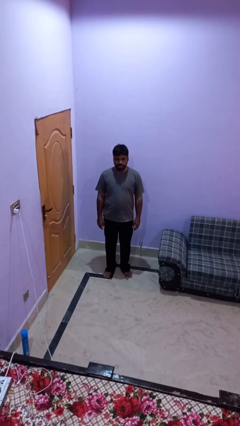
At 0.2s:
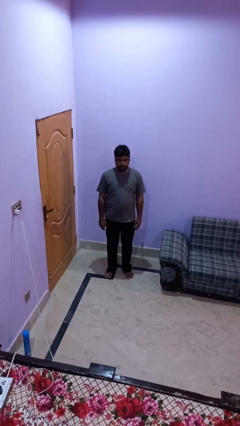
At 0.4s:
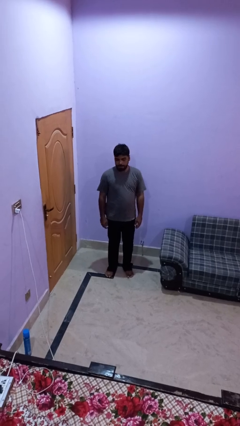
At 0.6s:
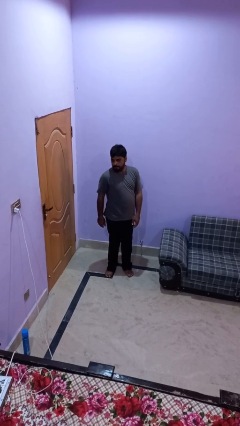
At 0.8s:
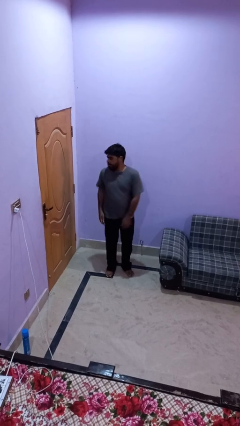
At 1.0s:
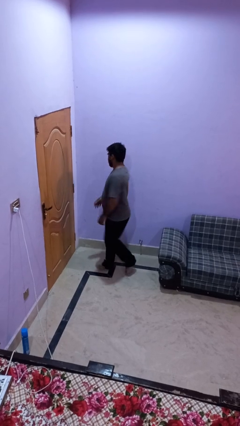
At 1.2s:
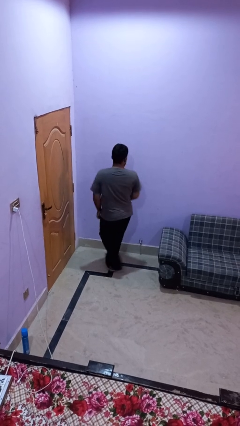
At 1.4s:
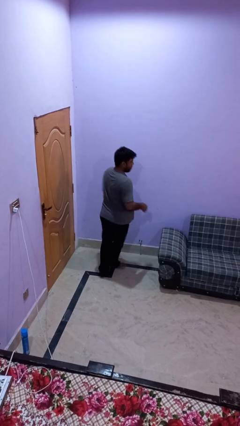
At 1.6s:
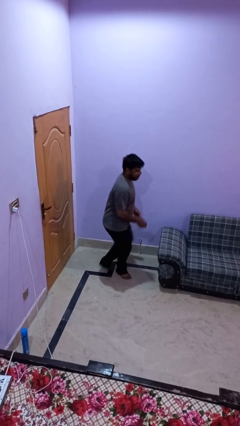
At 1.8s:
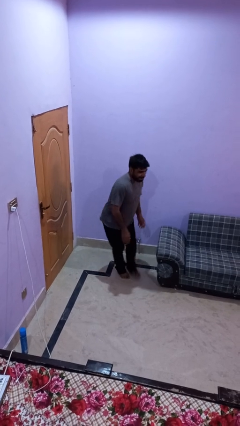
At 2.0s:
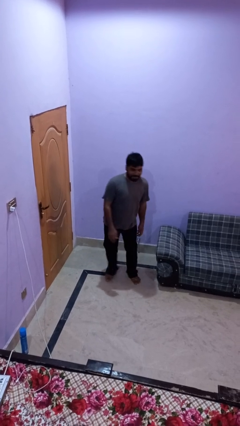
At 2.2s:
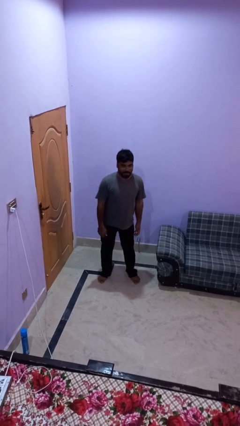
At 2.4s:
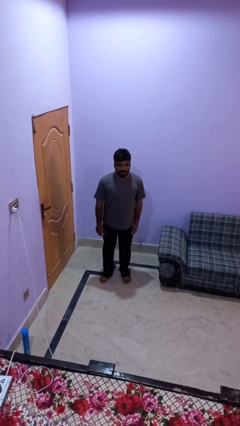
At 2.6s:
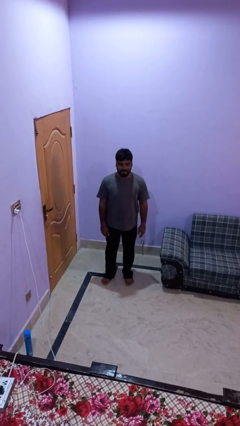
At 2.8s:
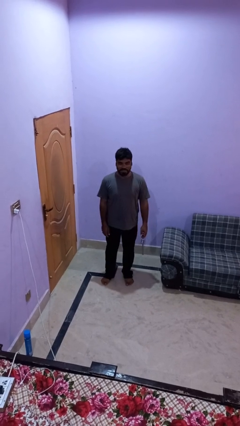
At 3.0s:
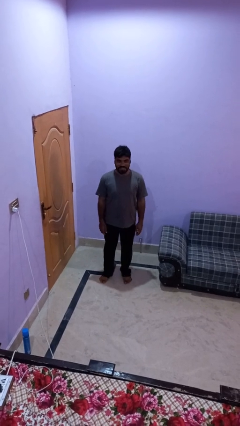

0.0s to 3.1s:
person twirls

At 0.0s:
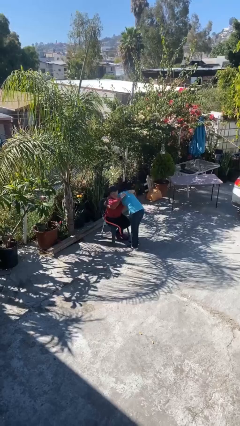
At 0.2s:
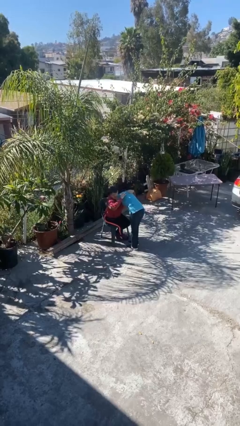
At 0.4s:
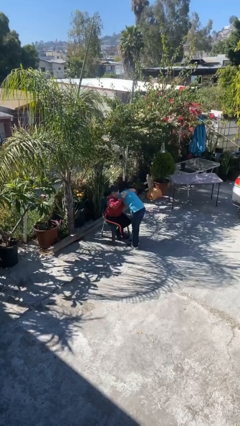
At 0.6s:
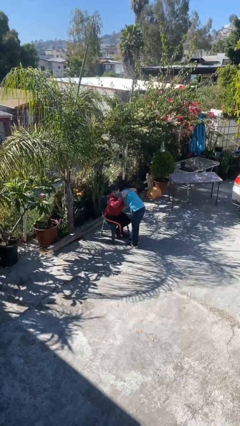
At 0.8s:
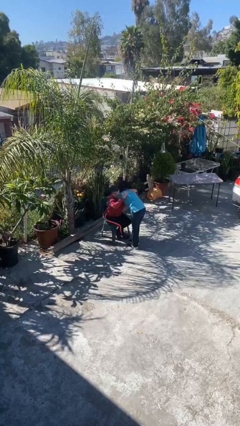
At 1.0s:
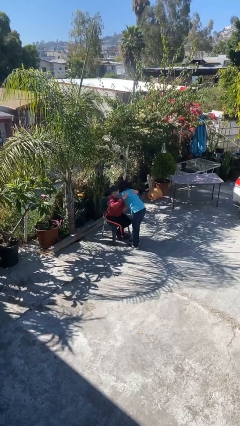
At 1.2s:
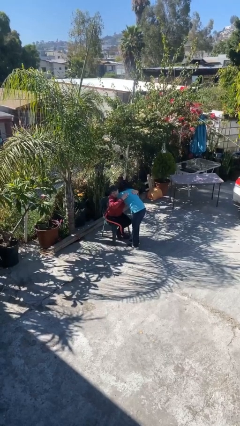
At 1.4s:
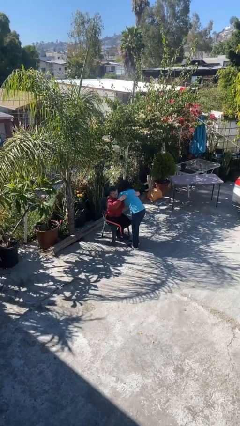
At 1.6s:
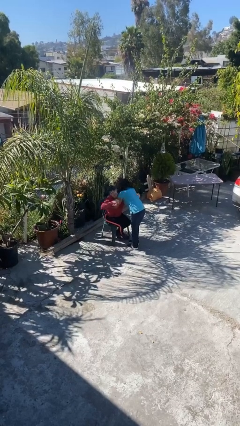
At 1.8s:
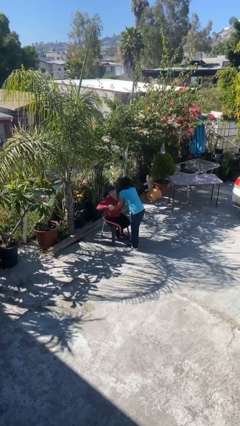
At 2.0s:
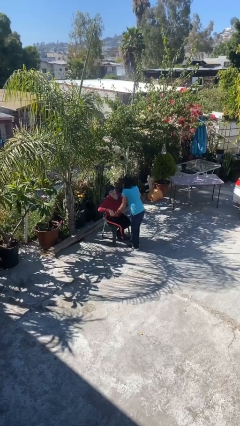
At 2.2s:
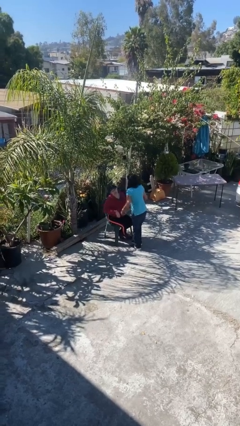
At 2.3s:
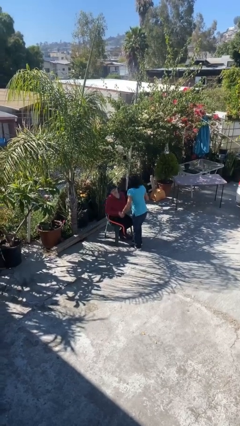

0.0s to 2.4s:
person embraces person

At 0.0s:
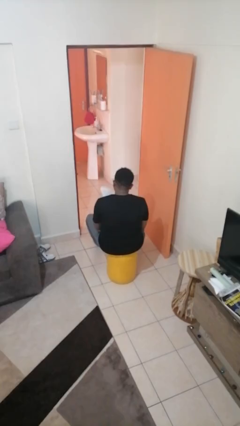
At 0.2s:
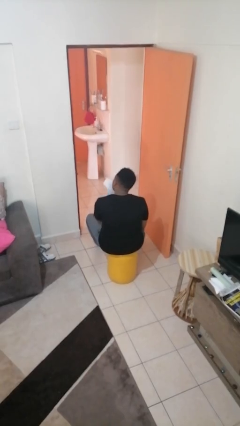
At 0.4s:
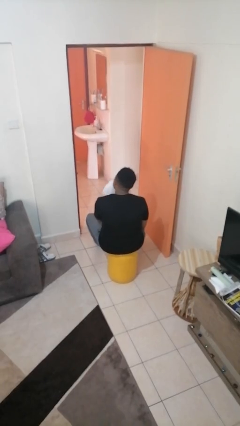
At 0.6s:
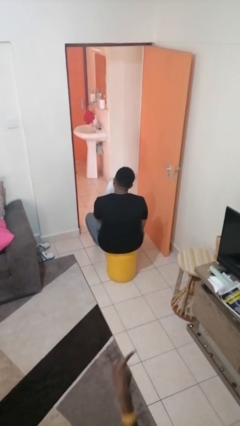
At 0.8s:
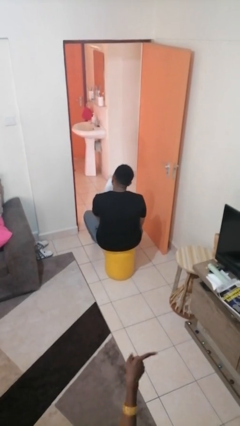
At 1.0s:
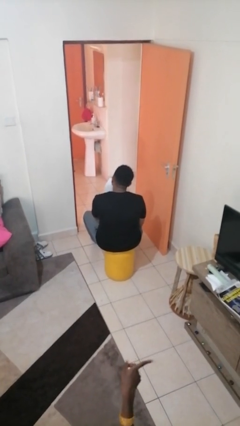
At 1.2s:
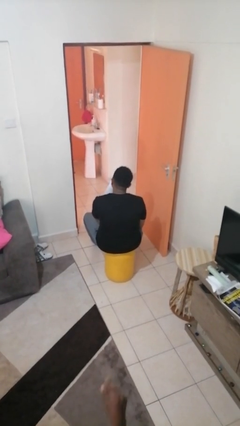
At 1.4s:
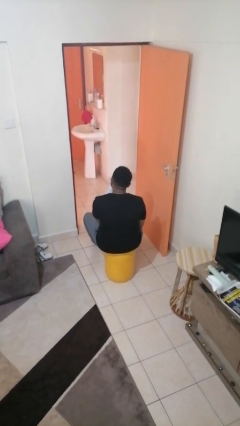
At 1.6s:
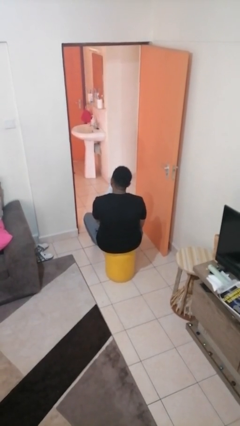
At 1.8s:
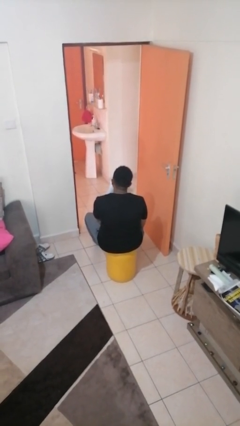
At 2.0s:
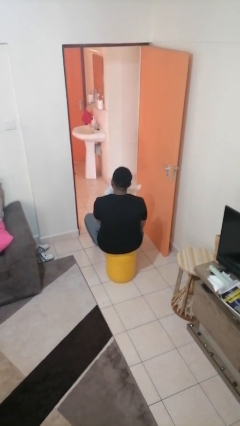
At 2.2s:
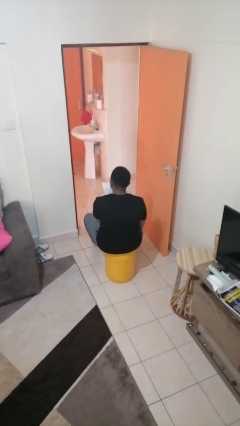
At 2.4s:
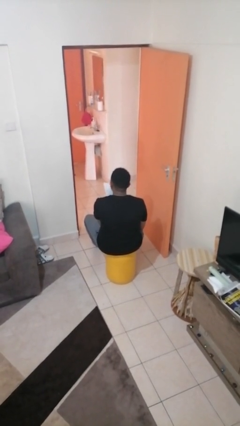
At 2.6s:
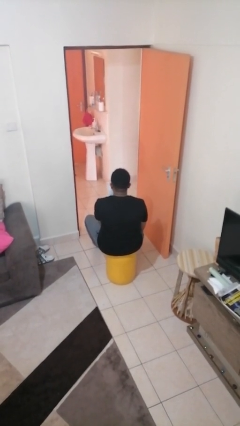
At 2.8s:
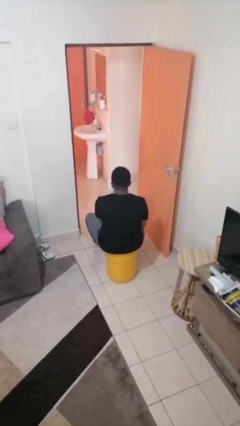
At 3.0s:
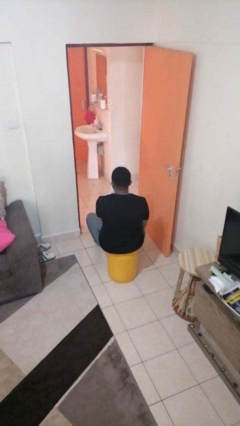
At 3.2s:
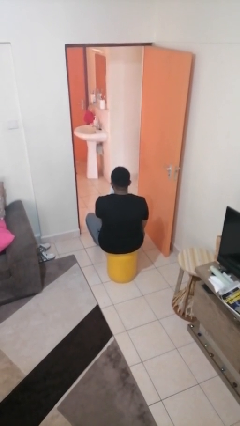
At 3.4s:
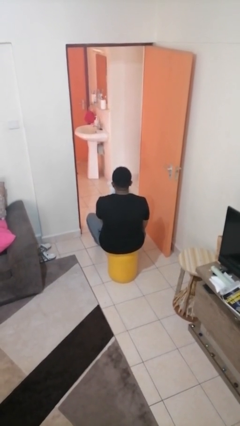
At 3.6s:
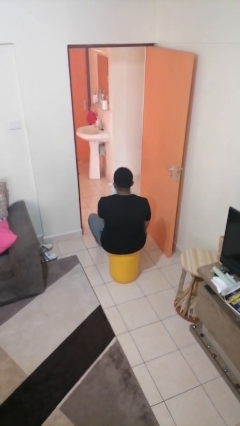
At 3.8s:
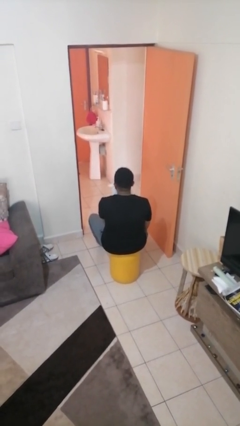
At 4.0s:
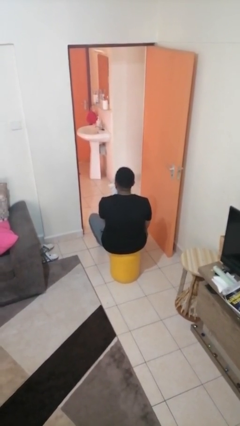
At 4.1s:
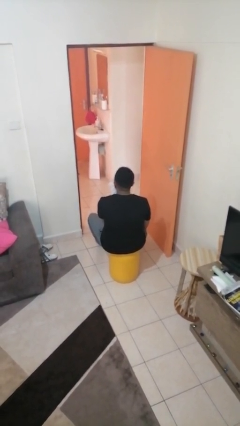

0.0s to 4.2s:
person wipes mouth with napkin

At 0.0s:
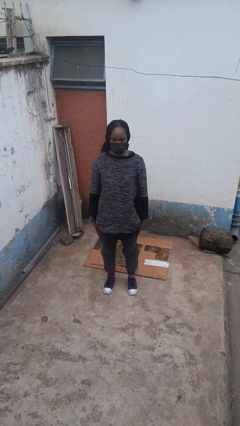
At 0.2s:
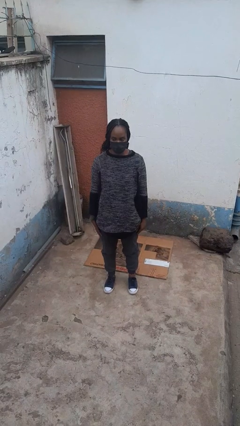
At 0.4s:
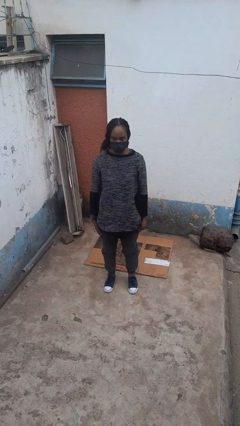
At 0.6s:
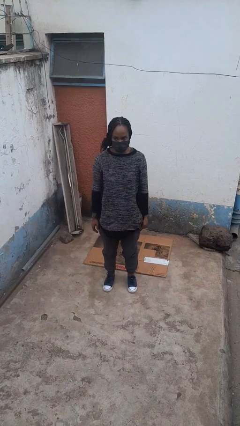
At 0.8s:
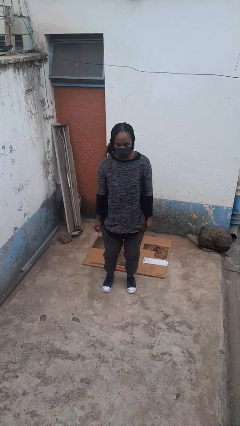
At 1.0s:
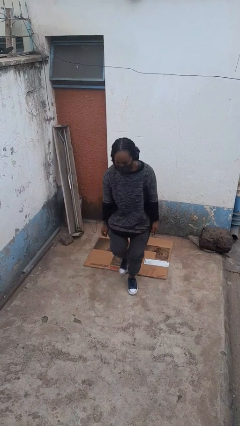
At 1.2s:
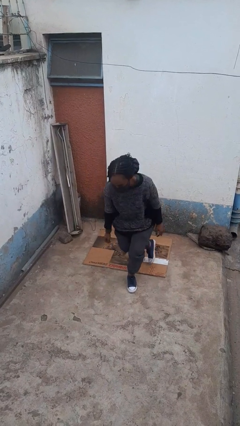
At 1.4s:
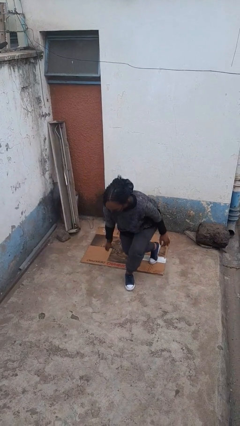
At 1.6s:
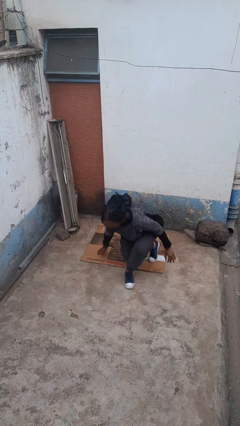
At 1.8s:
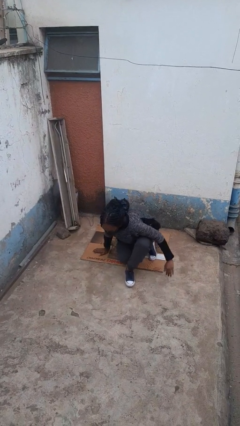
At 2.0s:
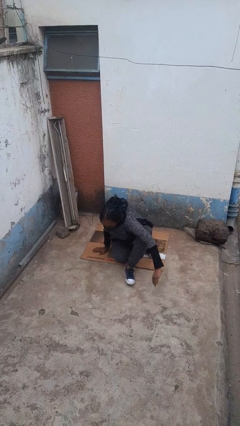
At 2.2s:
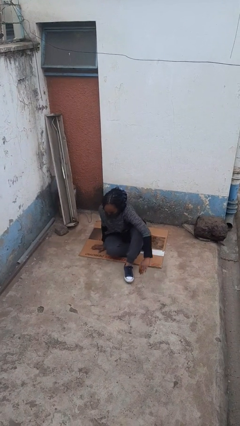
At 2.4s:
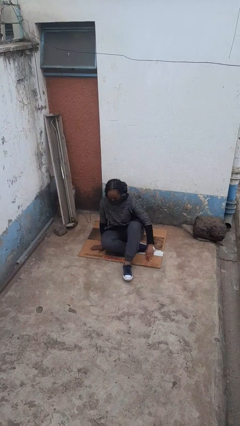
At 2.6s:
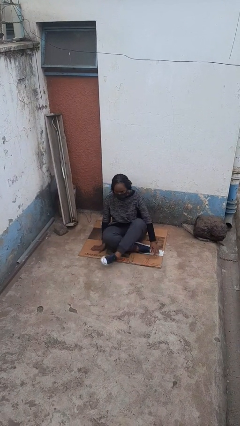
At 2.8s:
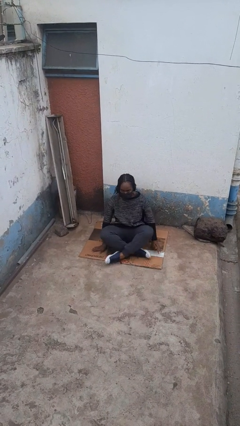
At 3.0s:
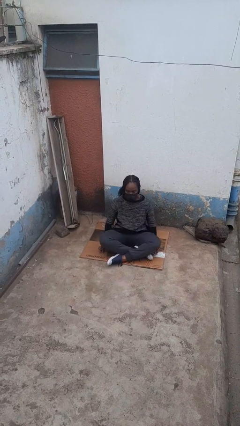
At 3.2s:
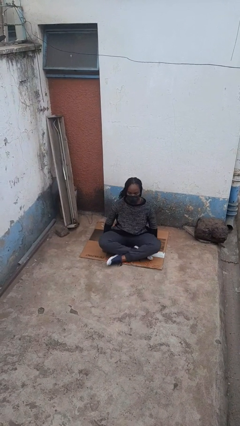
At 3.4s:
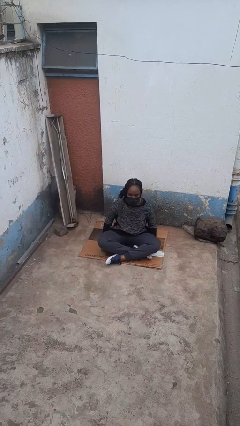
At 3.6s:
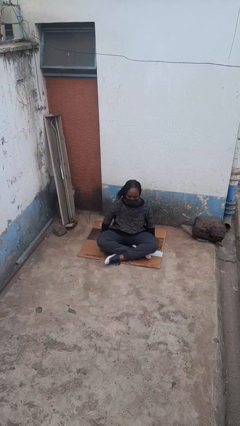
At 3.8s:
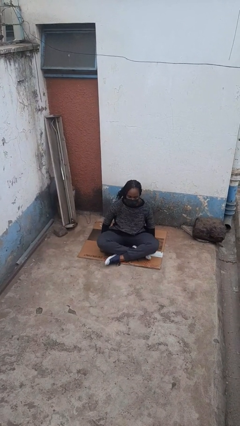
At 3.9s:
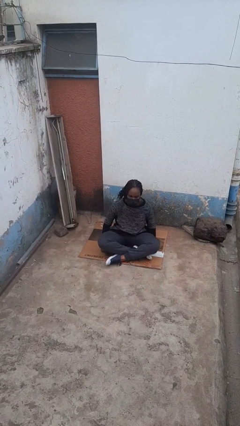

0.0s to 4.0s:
person sits crisscross

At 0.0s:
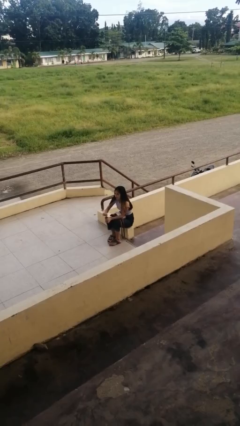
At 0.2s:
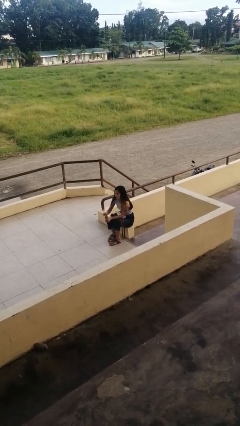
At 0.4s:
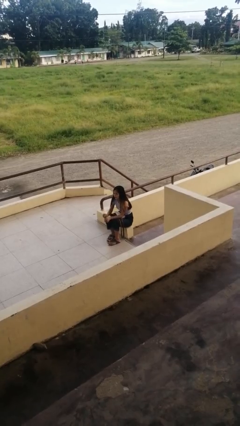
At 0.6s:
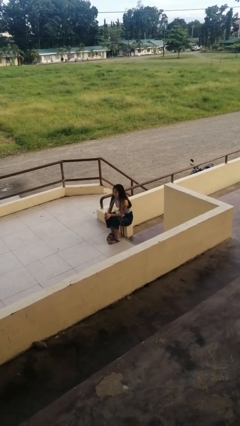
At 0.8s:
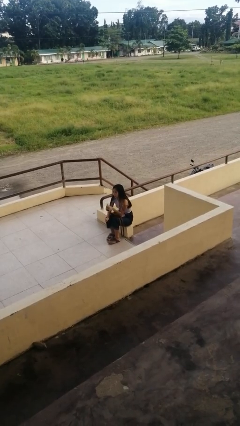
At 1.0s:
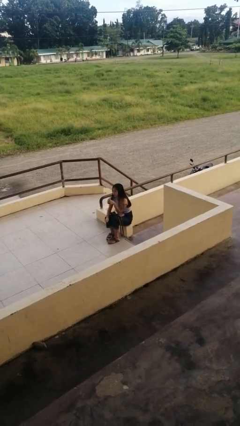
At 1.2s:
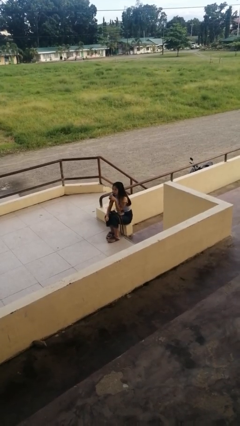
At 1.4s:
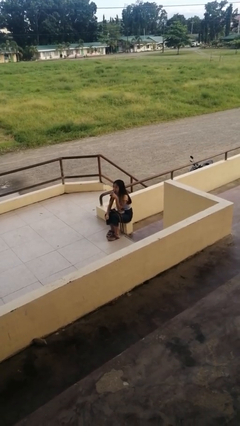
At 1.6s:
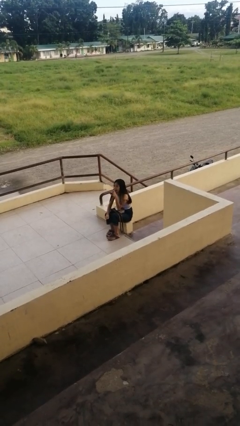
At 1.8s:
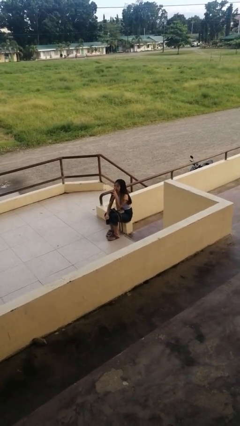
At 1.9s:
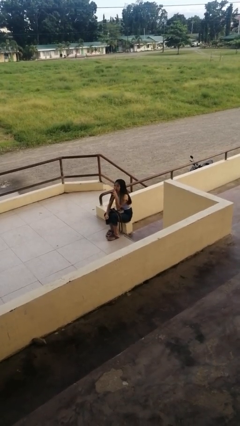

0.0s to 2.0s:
person drinks from beverage can

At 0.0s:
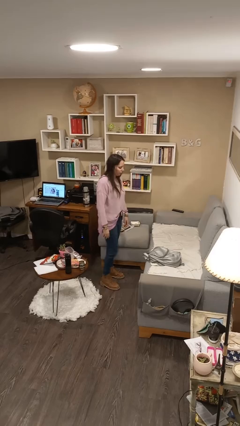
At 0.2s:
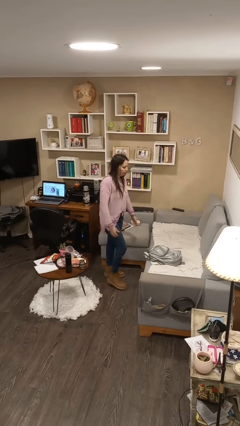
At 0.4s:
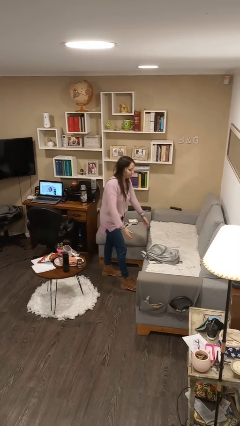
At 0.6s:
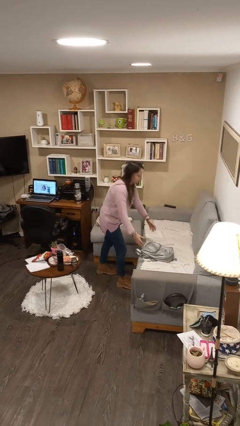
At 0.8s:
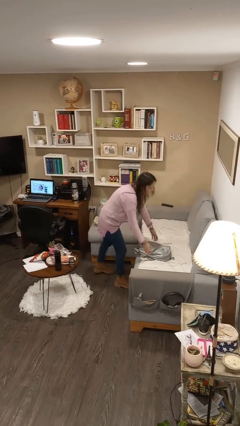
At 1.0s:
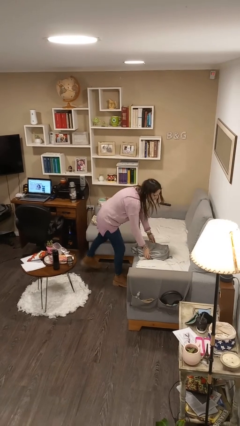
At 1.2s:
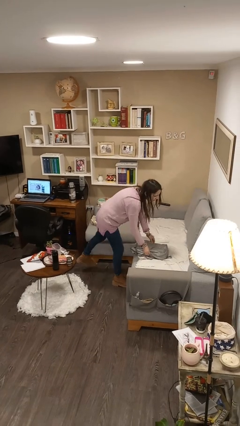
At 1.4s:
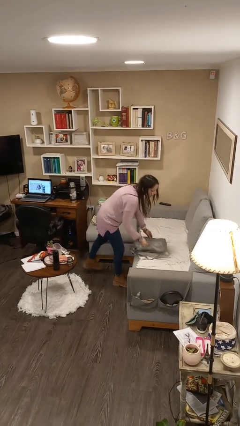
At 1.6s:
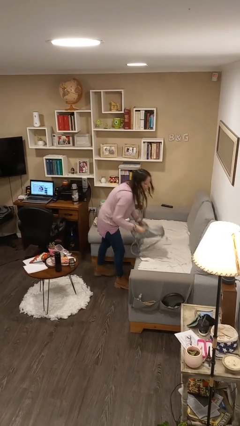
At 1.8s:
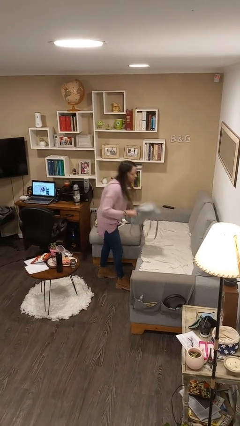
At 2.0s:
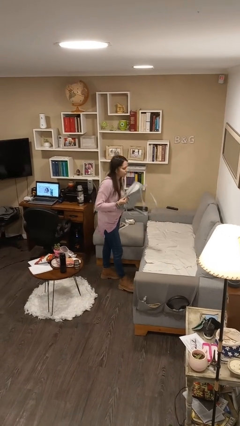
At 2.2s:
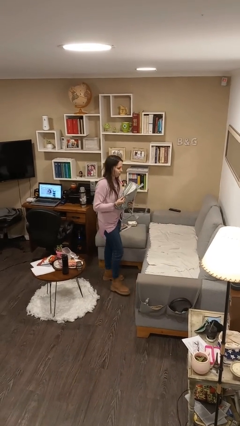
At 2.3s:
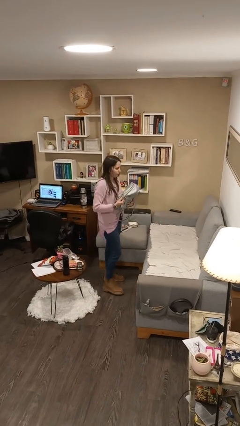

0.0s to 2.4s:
person picks up object from couch
